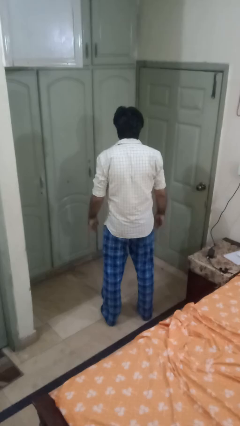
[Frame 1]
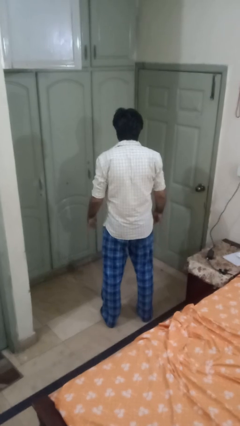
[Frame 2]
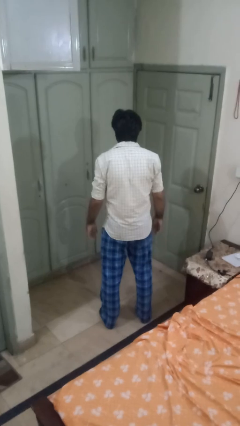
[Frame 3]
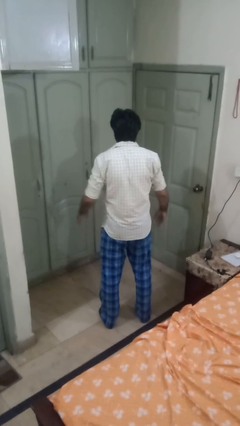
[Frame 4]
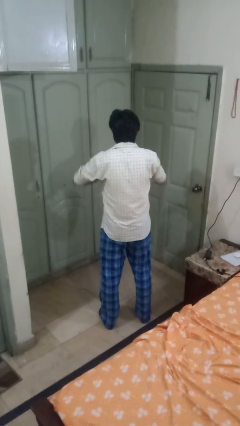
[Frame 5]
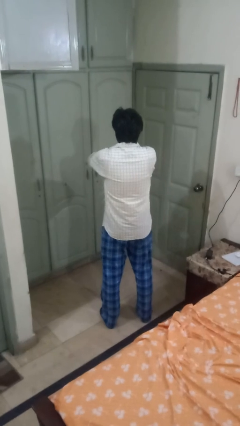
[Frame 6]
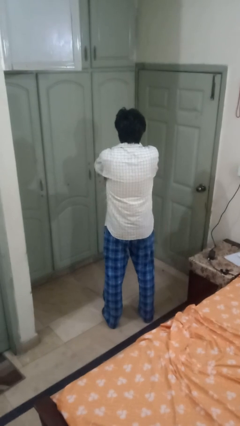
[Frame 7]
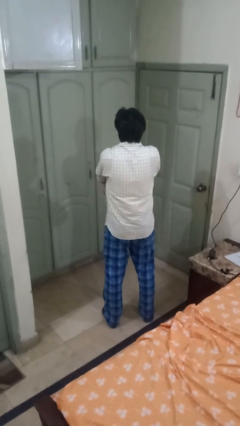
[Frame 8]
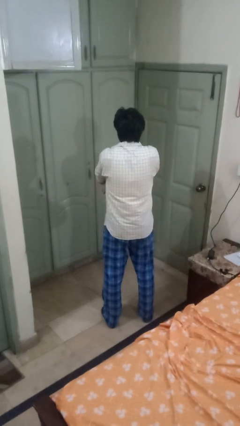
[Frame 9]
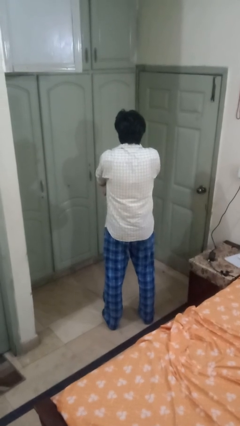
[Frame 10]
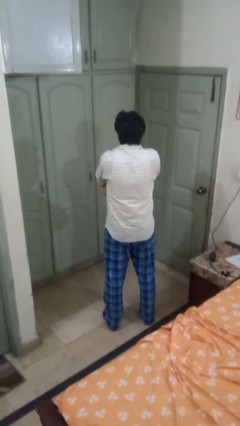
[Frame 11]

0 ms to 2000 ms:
person crosses arms

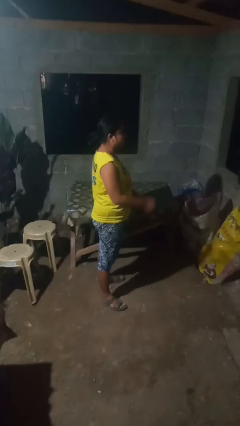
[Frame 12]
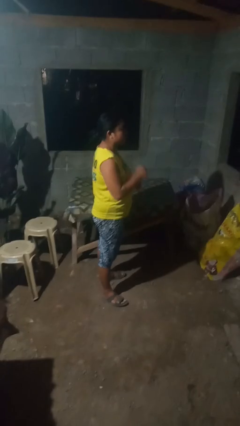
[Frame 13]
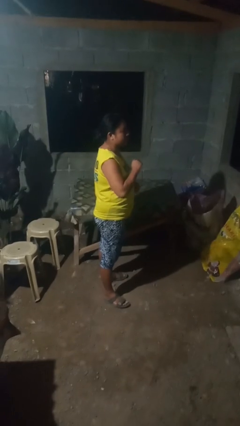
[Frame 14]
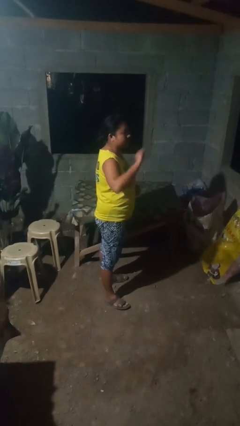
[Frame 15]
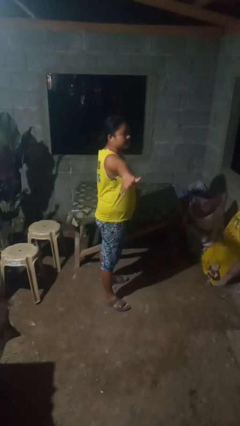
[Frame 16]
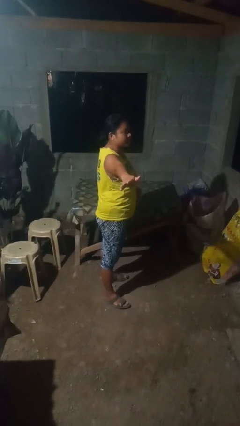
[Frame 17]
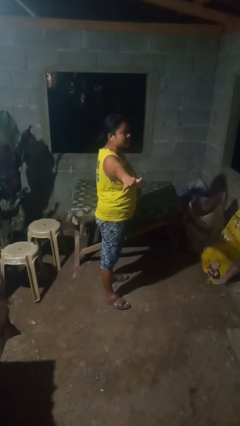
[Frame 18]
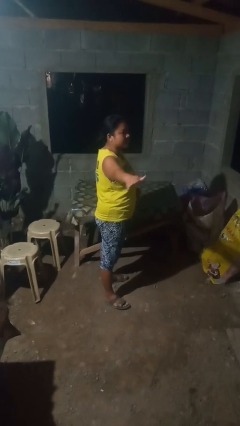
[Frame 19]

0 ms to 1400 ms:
person karate chop

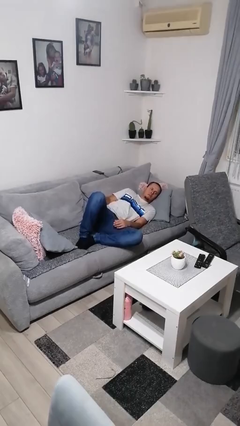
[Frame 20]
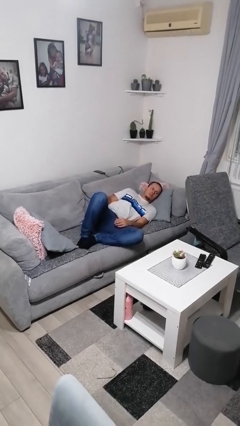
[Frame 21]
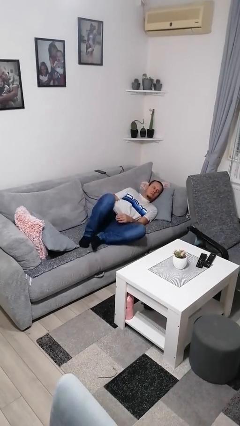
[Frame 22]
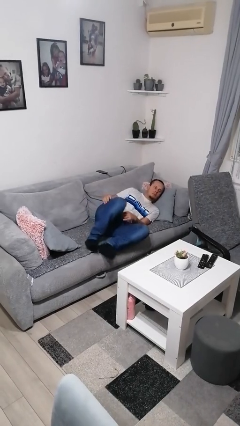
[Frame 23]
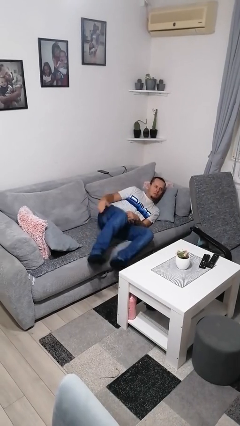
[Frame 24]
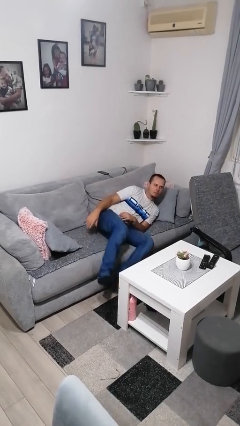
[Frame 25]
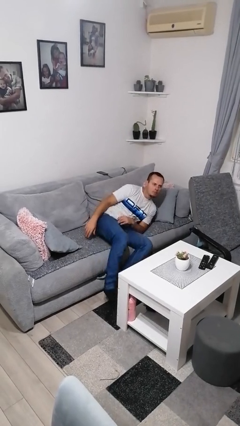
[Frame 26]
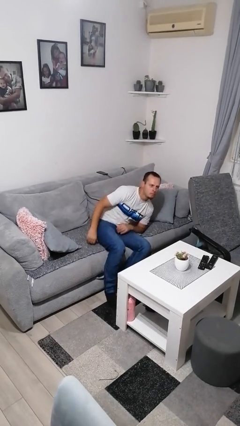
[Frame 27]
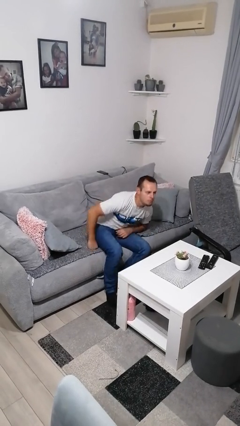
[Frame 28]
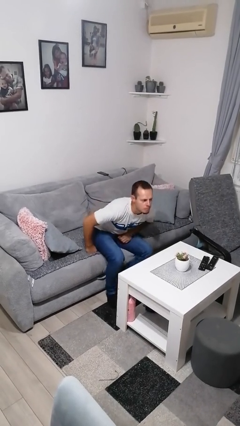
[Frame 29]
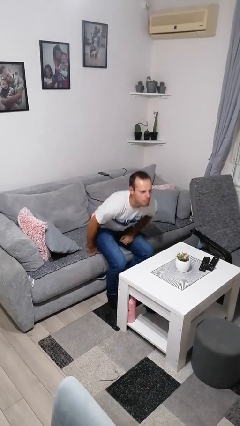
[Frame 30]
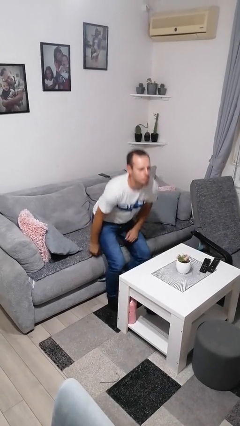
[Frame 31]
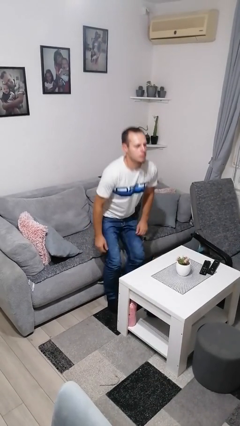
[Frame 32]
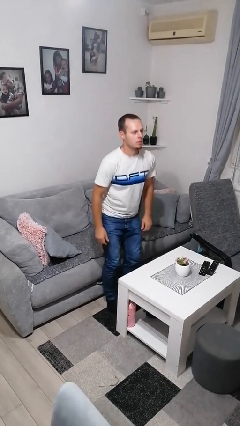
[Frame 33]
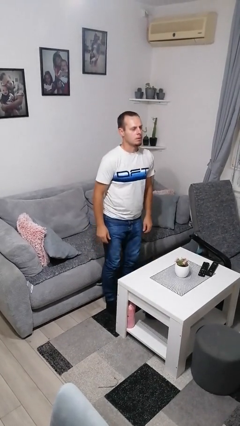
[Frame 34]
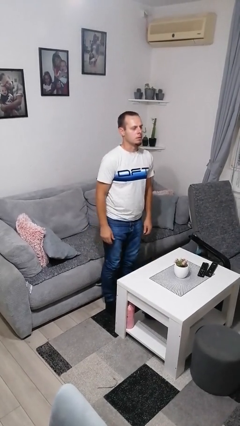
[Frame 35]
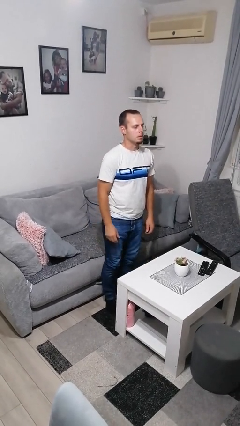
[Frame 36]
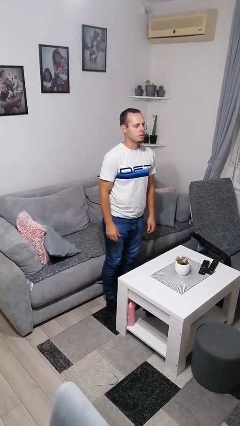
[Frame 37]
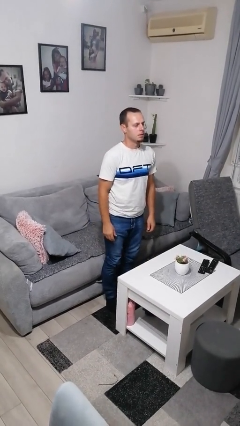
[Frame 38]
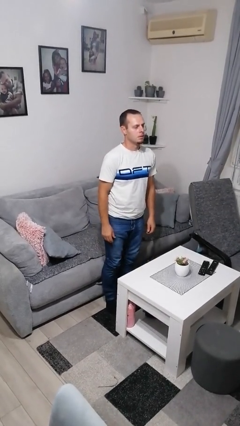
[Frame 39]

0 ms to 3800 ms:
person stands up

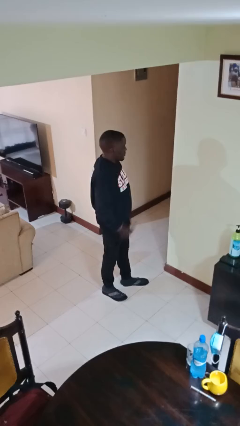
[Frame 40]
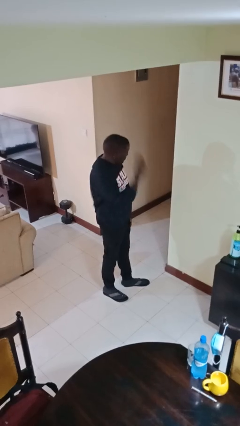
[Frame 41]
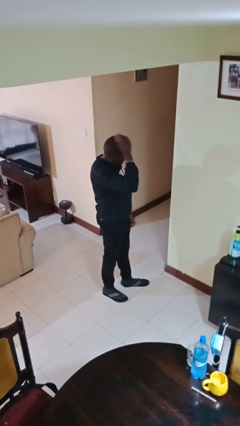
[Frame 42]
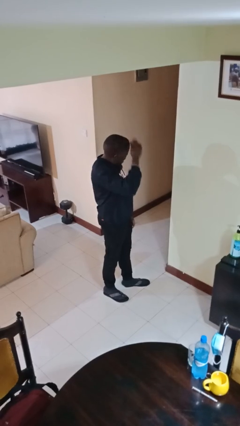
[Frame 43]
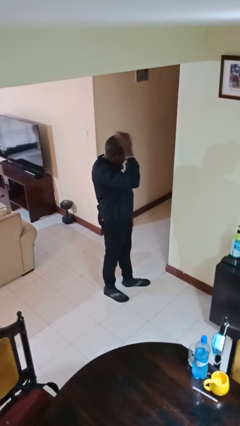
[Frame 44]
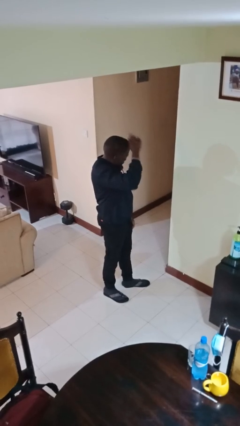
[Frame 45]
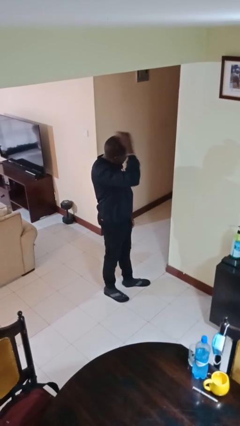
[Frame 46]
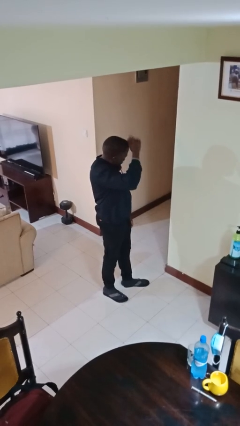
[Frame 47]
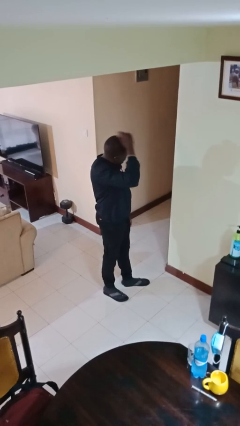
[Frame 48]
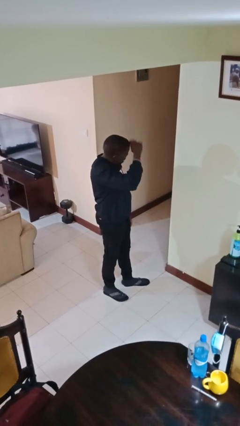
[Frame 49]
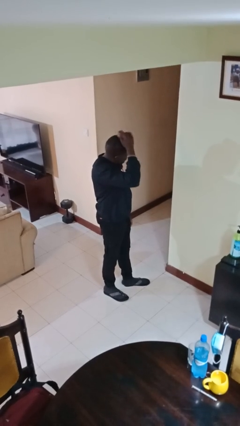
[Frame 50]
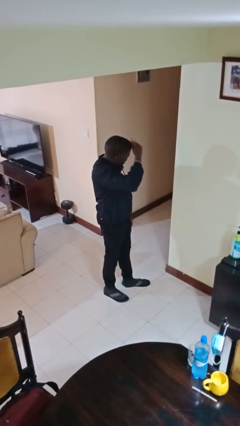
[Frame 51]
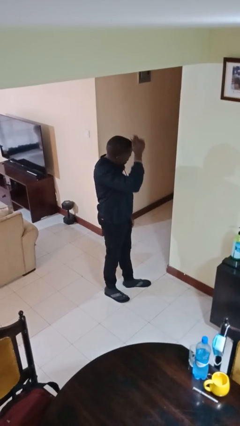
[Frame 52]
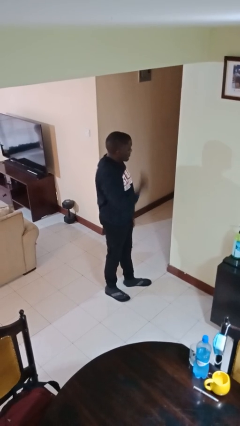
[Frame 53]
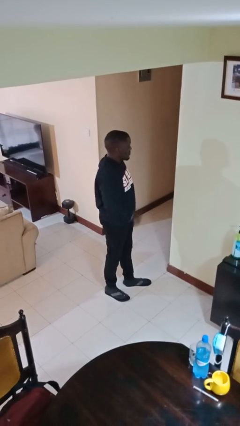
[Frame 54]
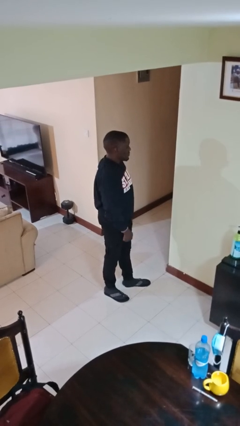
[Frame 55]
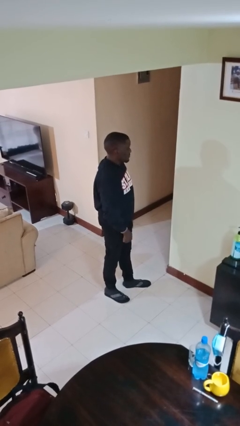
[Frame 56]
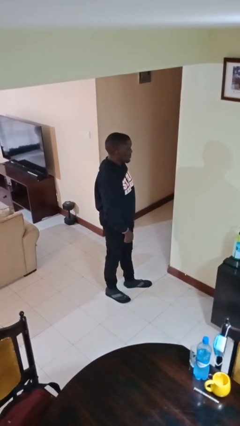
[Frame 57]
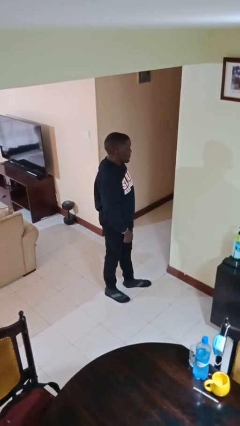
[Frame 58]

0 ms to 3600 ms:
person brushes hair

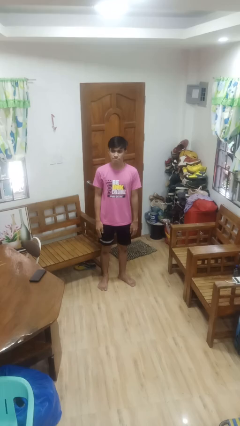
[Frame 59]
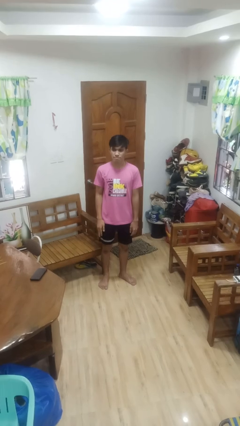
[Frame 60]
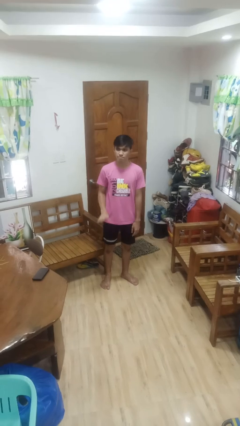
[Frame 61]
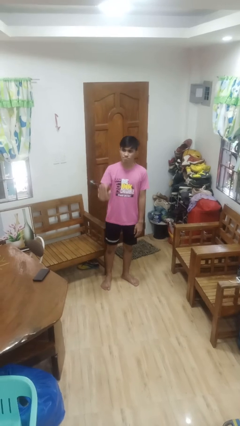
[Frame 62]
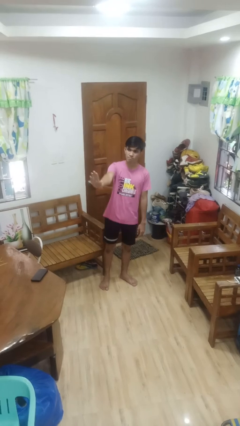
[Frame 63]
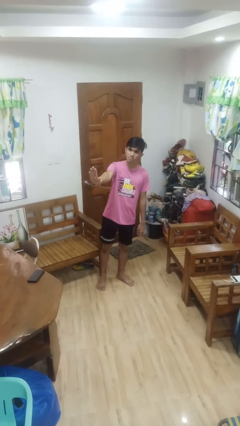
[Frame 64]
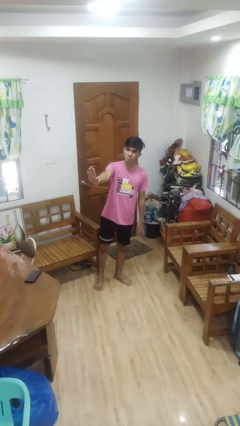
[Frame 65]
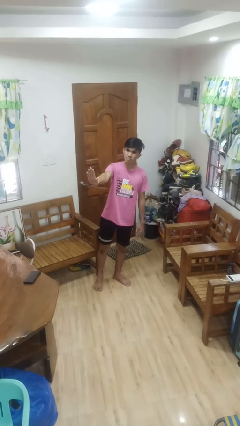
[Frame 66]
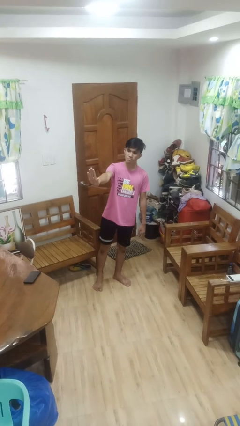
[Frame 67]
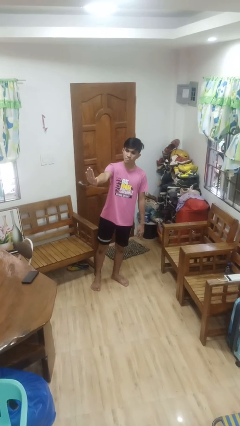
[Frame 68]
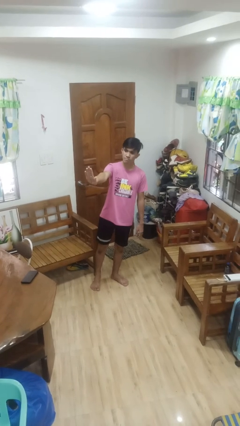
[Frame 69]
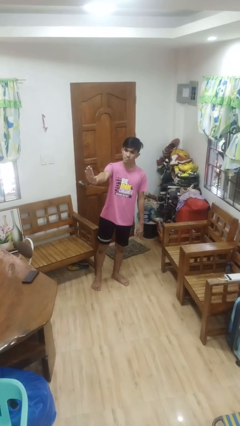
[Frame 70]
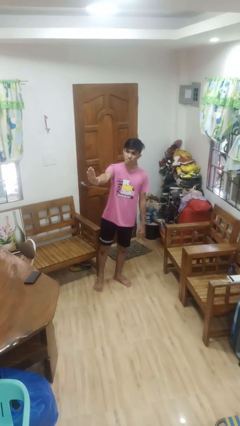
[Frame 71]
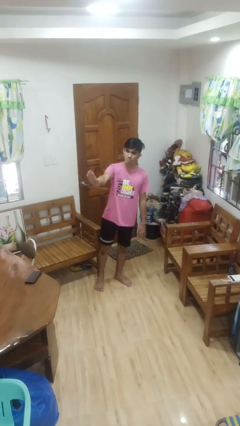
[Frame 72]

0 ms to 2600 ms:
person gestures stop

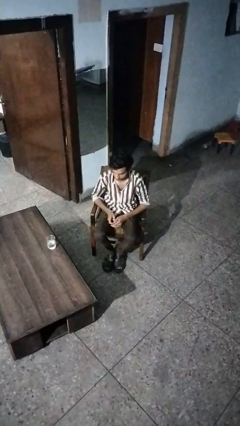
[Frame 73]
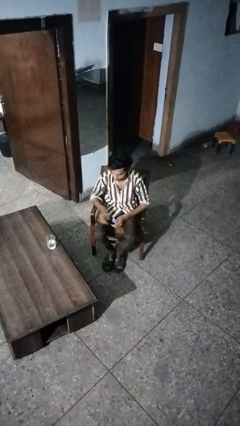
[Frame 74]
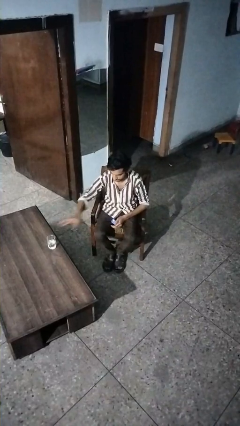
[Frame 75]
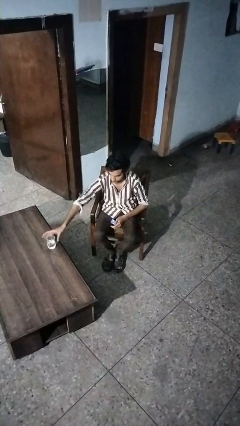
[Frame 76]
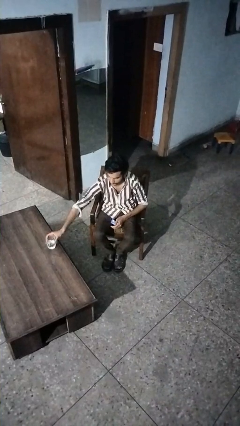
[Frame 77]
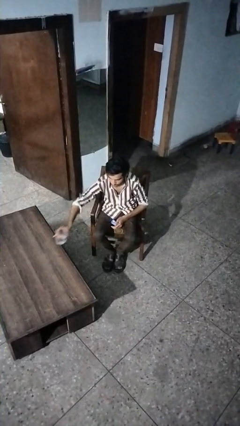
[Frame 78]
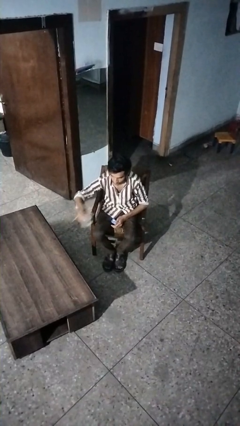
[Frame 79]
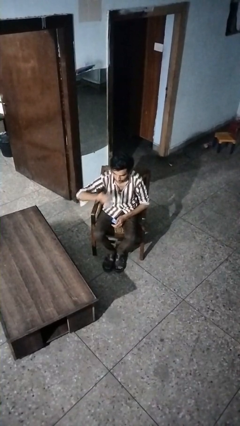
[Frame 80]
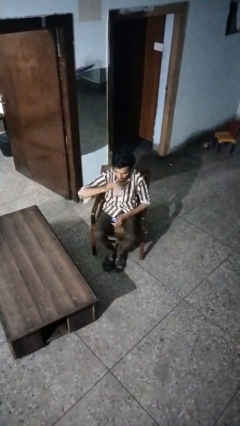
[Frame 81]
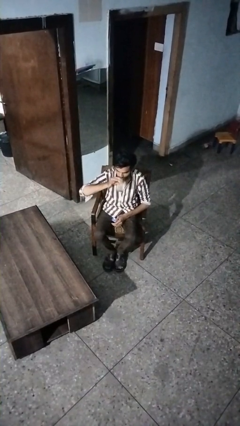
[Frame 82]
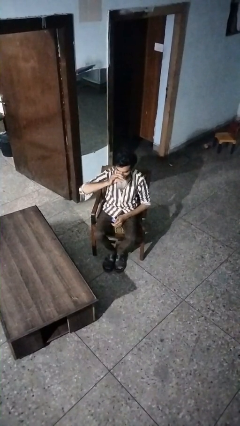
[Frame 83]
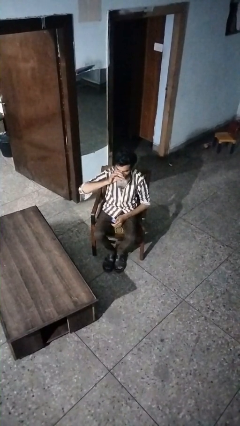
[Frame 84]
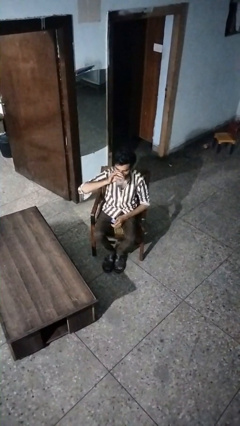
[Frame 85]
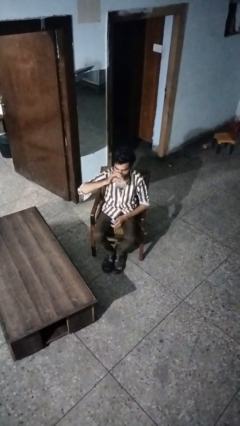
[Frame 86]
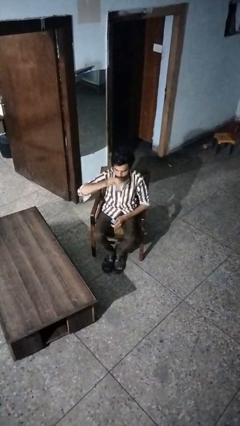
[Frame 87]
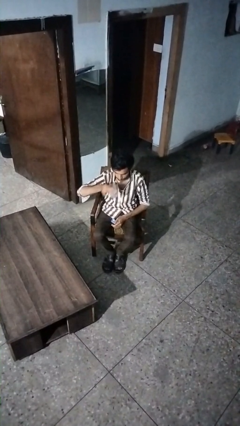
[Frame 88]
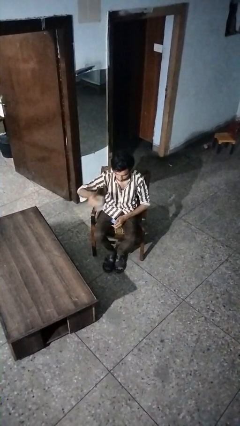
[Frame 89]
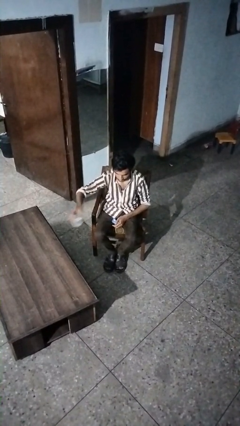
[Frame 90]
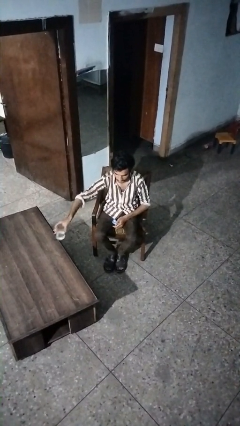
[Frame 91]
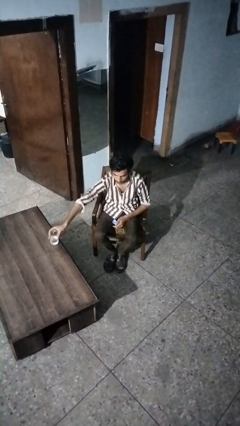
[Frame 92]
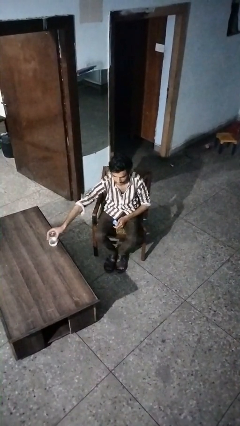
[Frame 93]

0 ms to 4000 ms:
person drinks from cup
